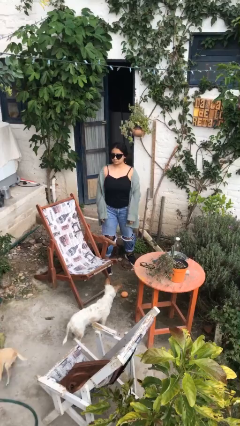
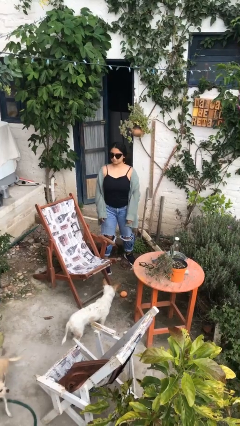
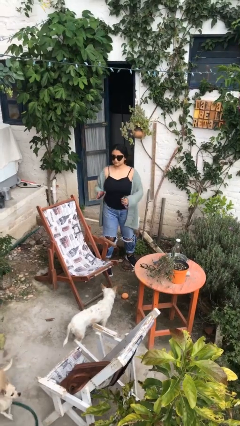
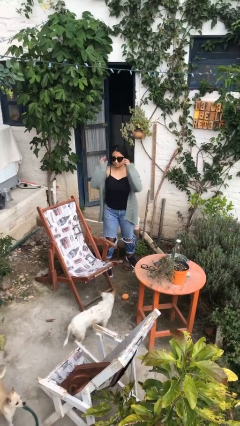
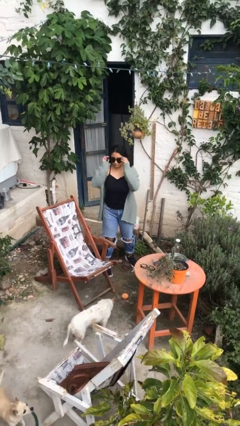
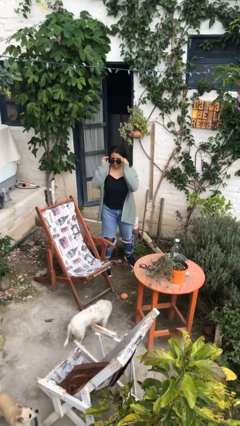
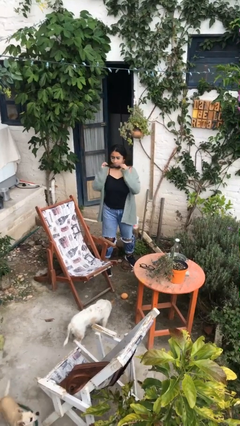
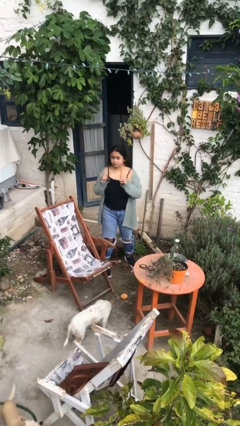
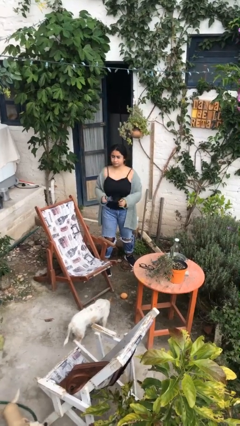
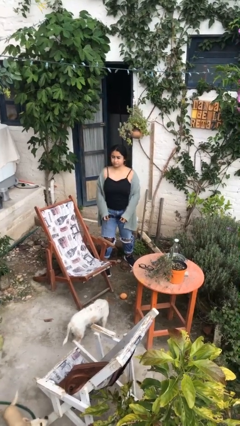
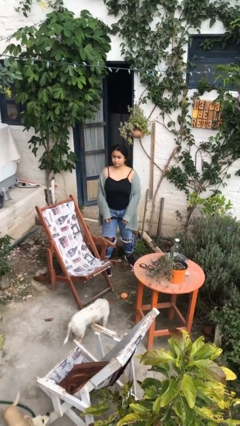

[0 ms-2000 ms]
person takes off sunglasses

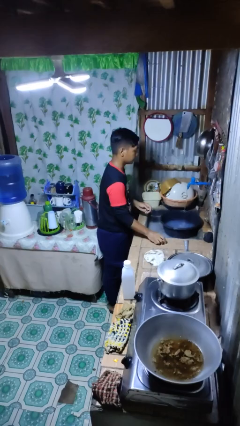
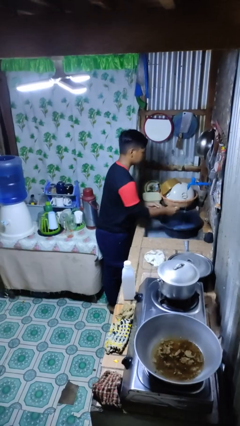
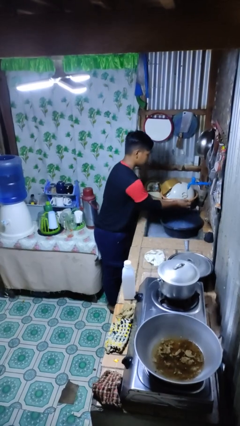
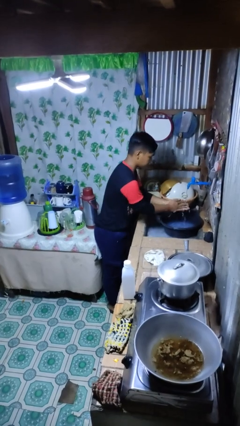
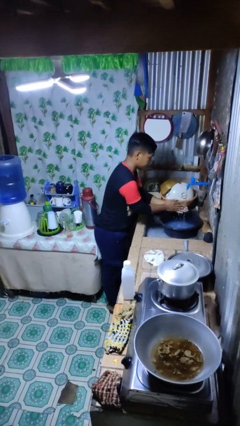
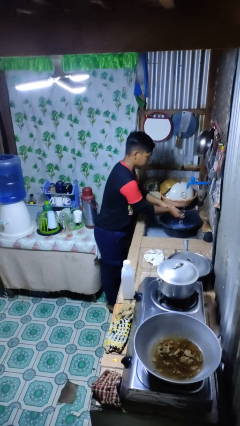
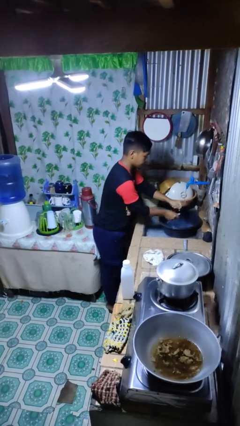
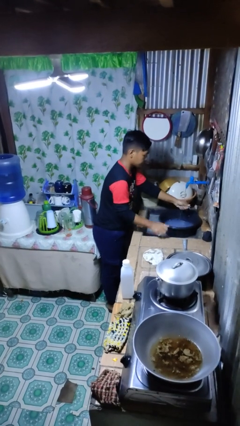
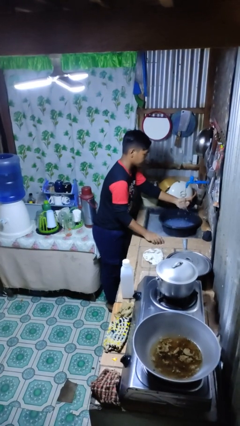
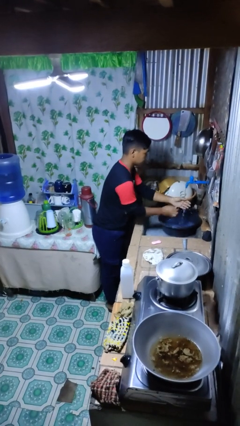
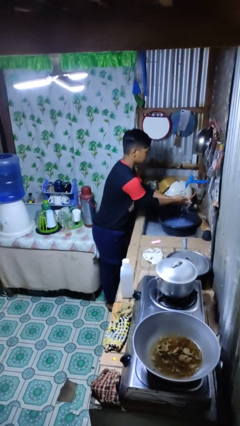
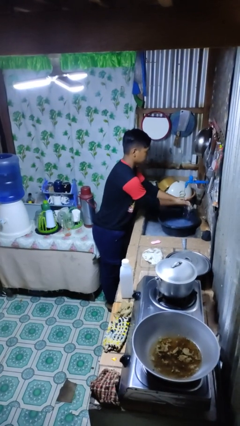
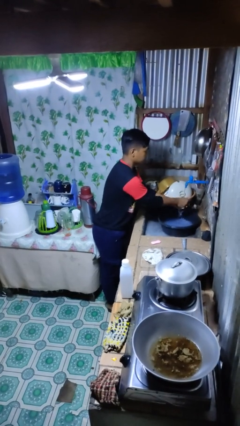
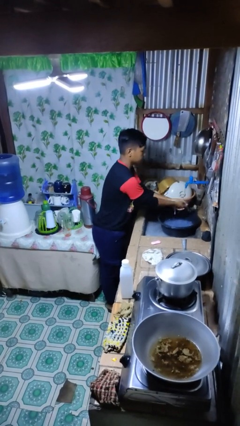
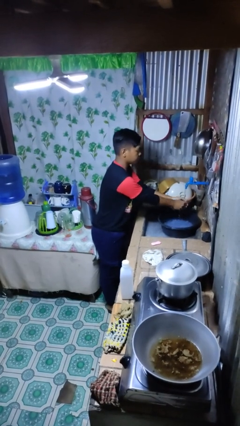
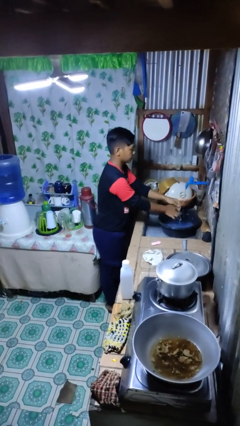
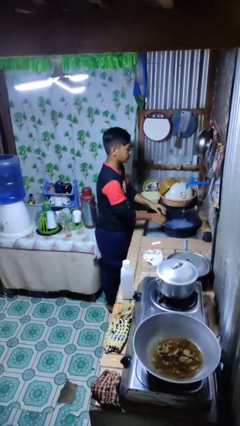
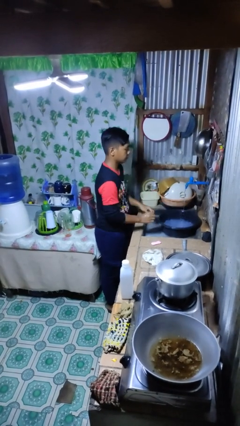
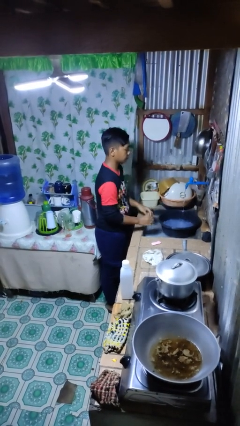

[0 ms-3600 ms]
person washes hands

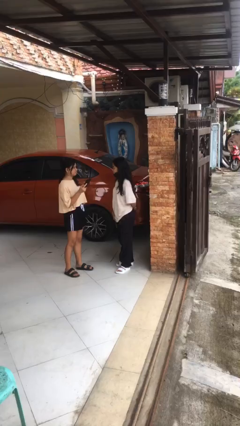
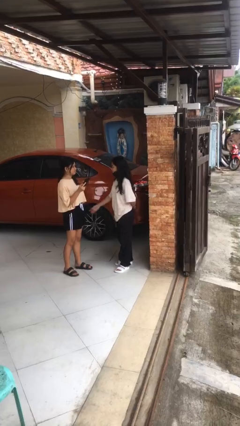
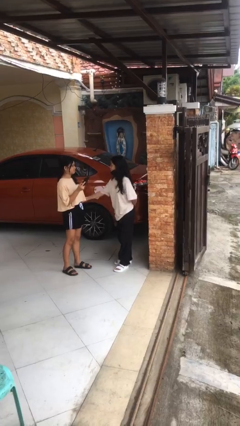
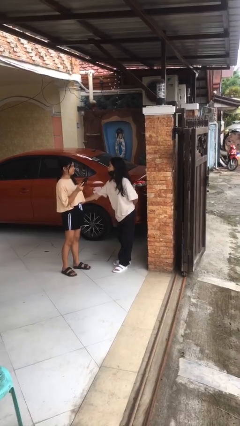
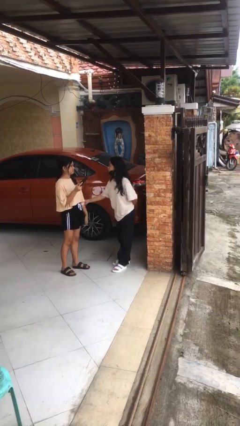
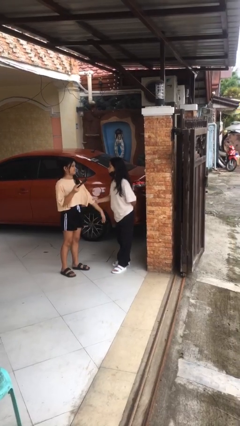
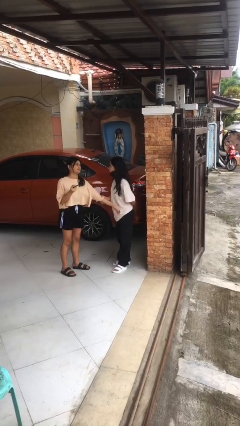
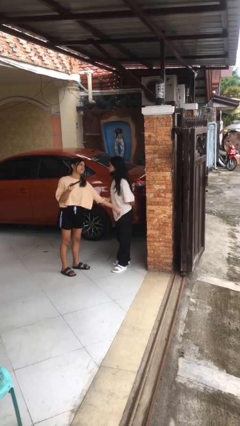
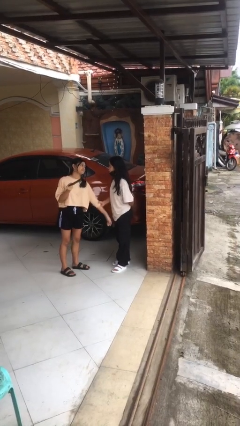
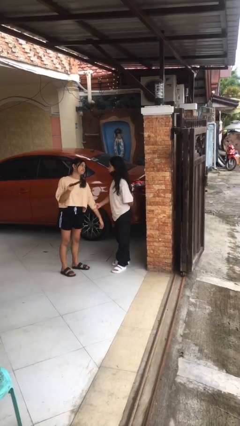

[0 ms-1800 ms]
person grabs person by forearm

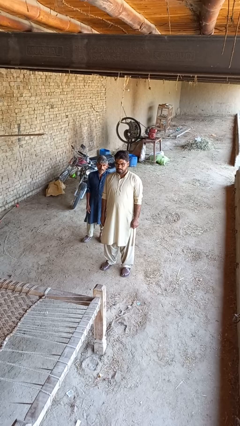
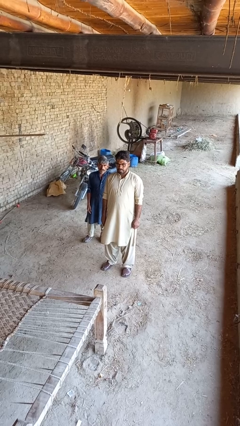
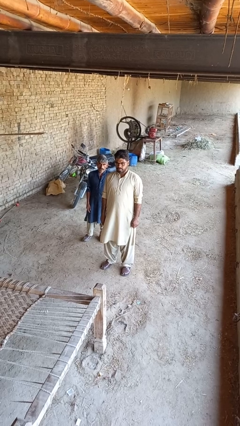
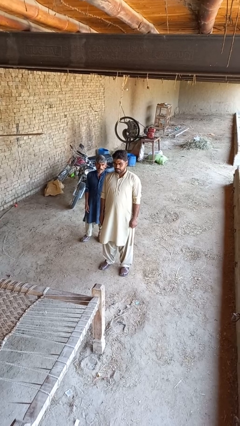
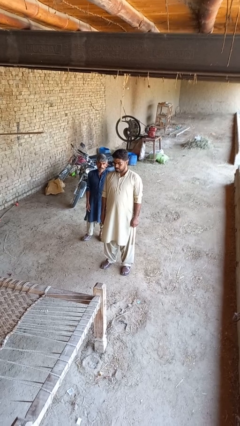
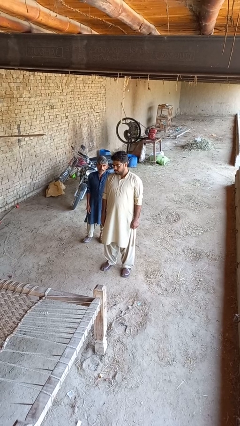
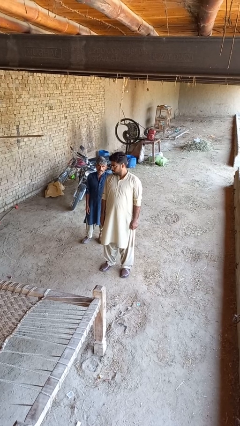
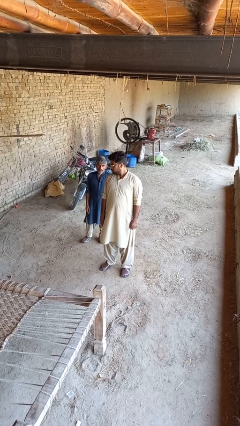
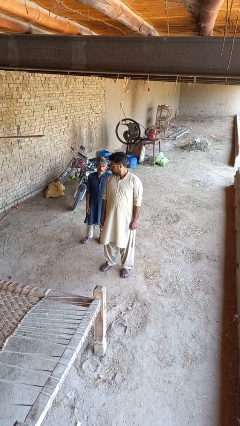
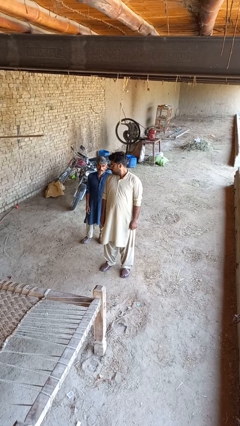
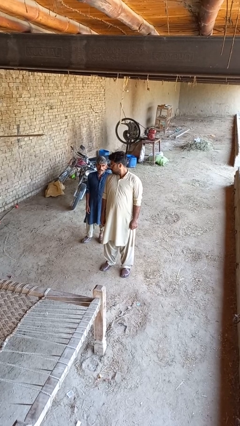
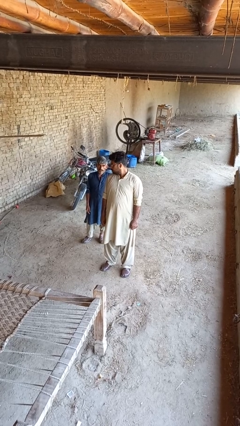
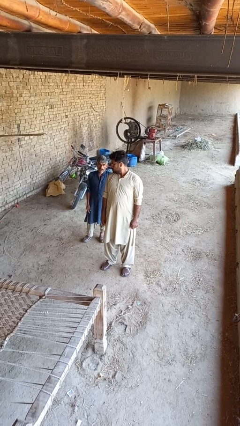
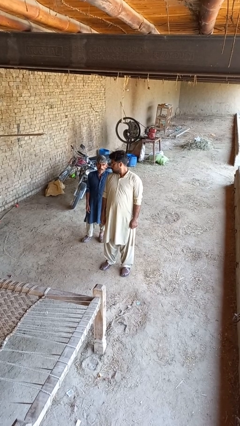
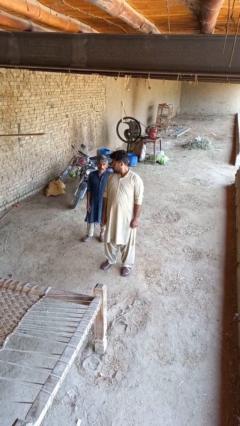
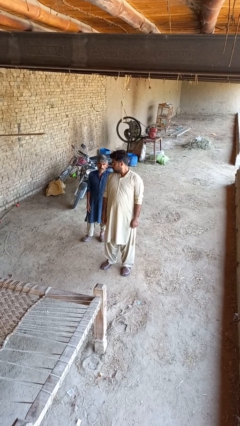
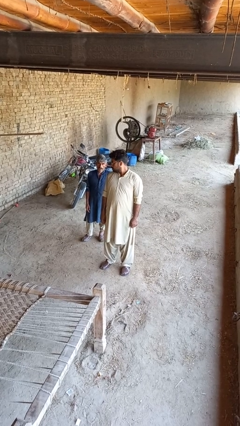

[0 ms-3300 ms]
person looks over shoulder

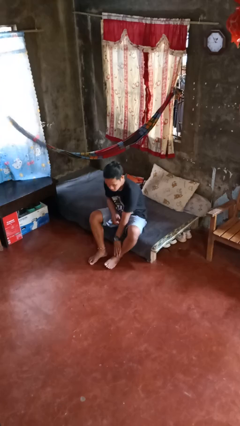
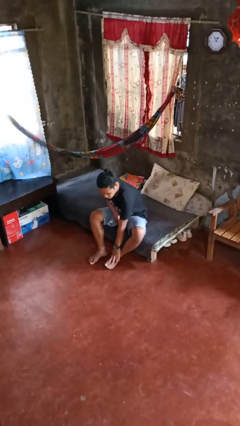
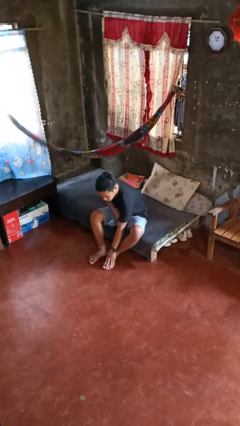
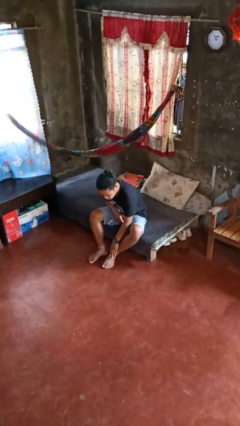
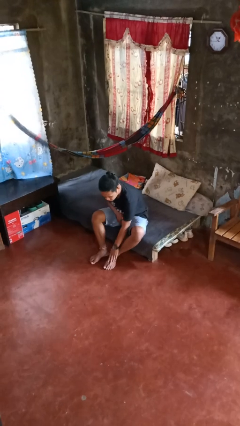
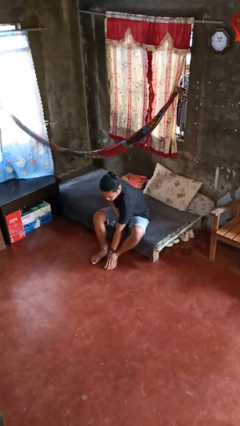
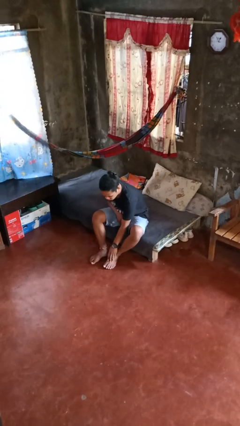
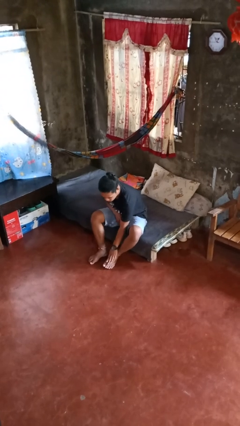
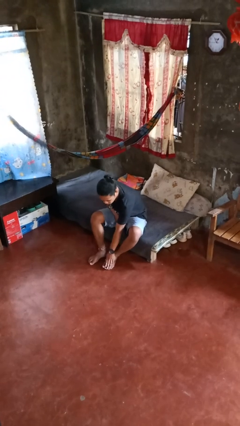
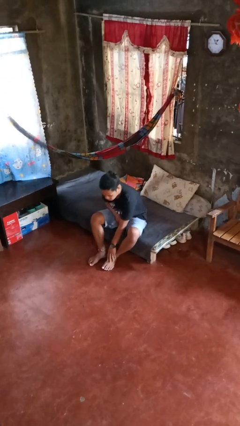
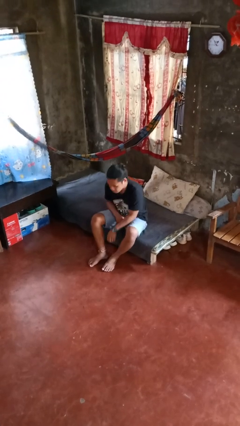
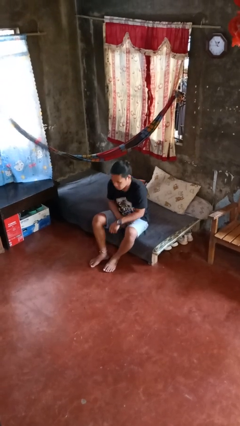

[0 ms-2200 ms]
person rubs foot

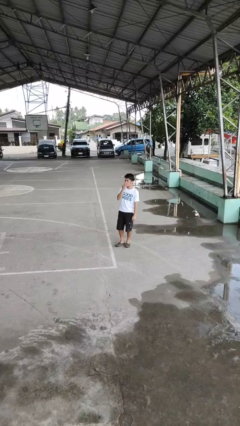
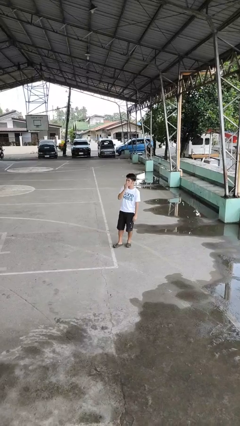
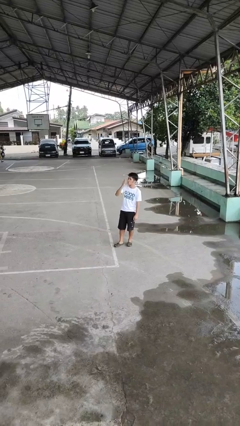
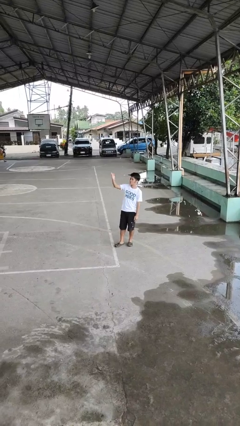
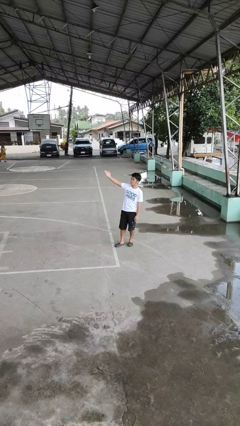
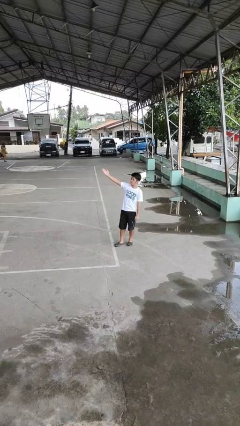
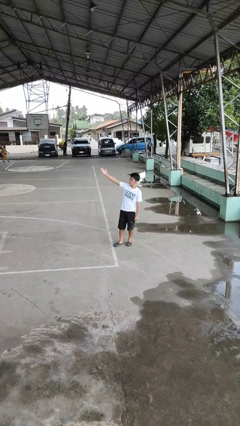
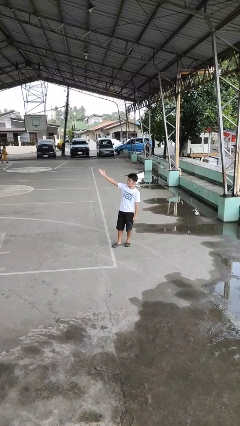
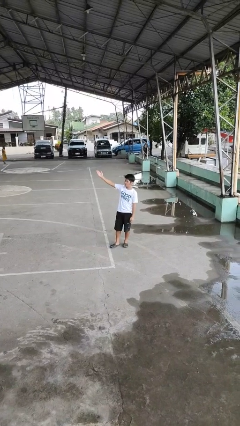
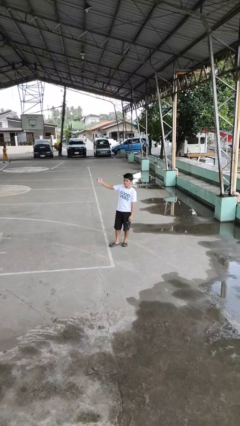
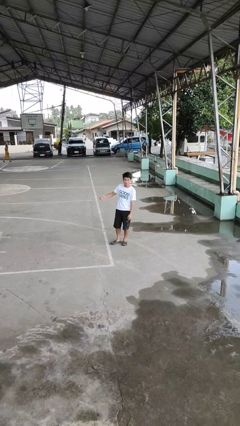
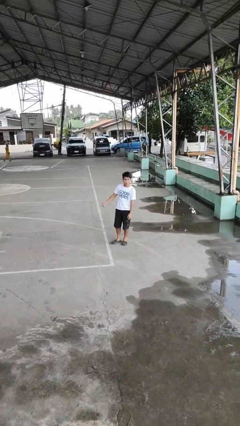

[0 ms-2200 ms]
person gestures blow kiss

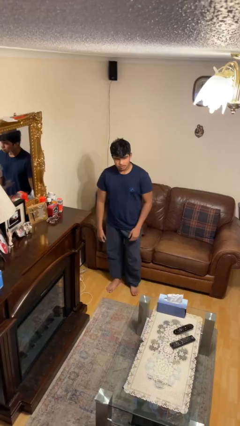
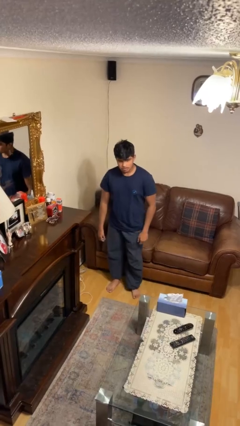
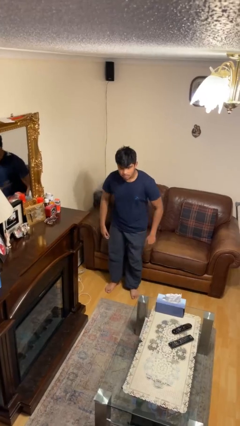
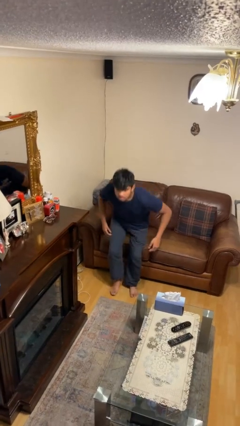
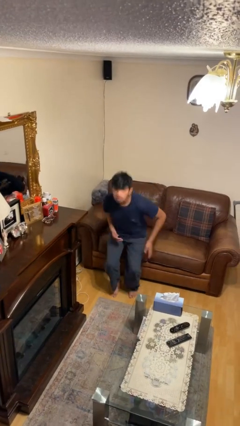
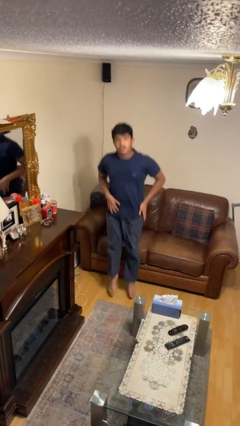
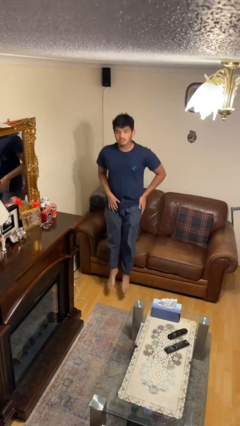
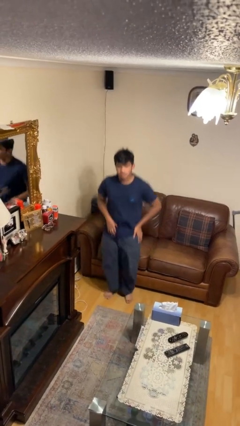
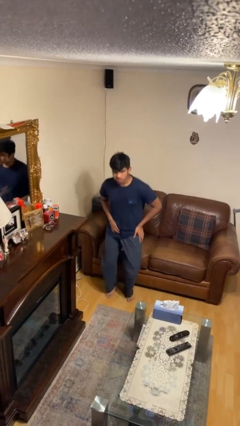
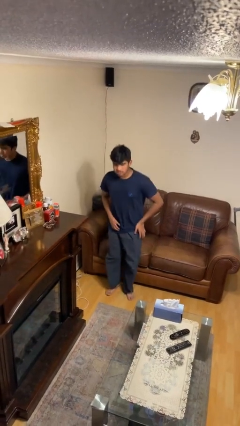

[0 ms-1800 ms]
person jumps

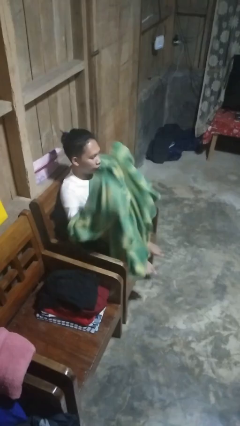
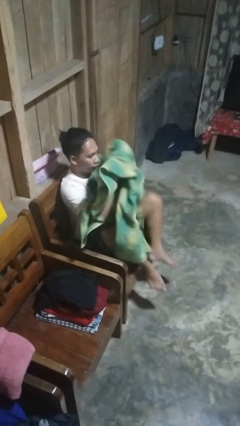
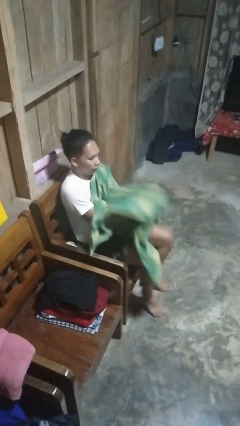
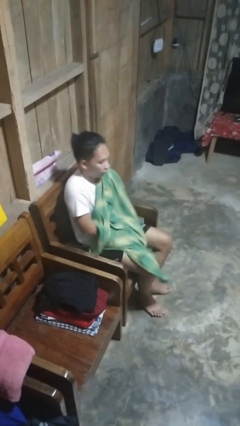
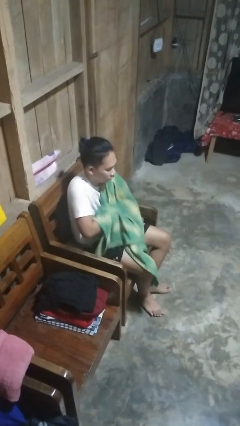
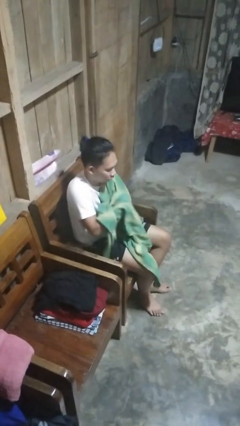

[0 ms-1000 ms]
person uncovers with blanket
